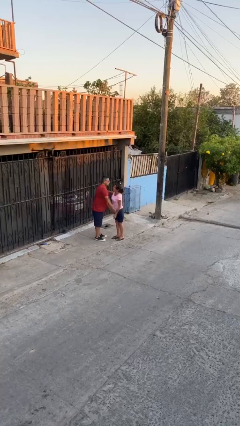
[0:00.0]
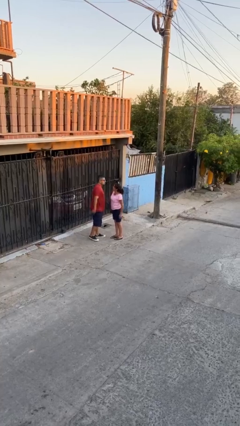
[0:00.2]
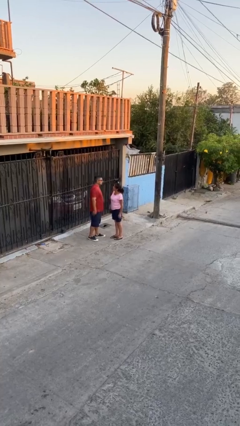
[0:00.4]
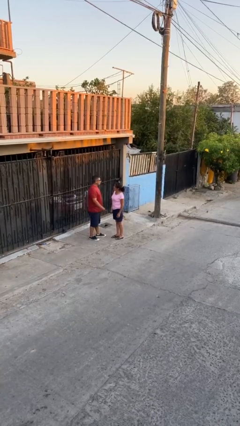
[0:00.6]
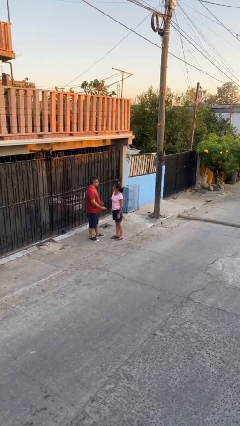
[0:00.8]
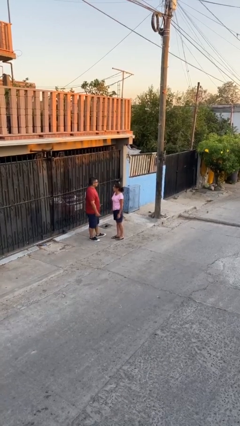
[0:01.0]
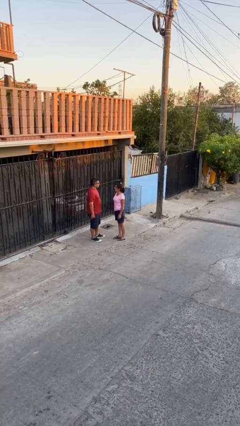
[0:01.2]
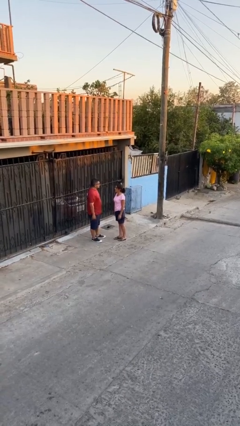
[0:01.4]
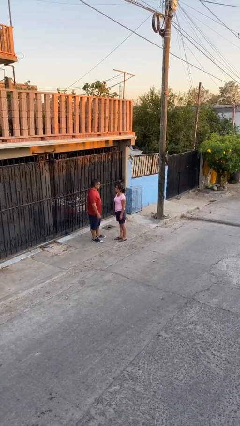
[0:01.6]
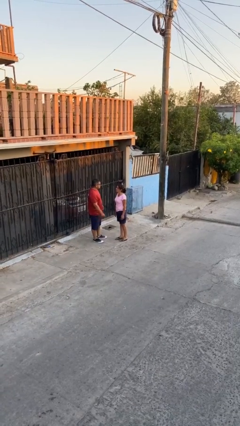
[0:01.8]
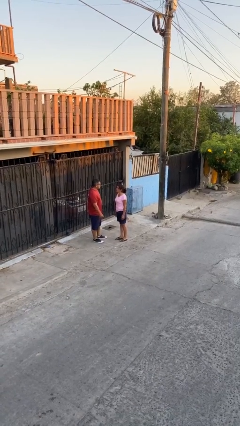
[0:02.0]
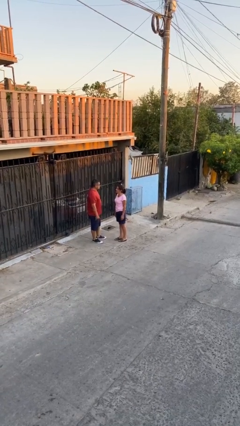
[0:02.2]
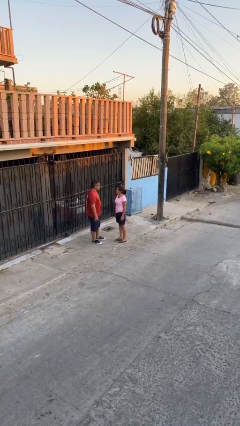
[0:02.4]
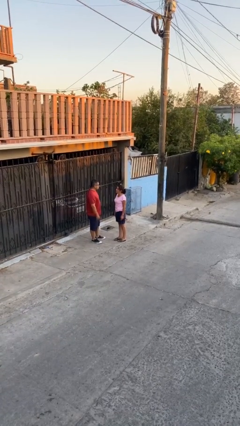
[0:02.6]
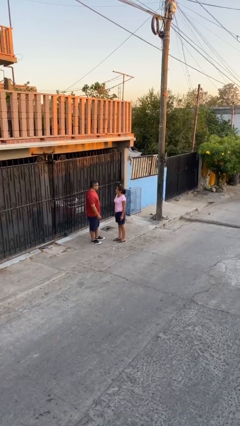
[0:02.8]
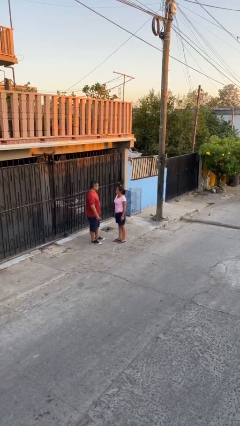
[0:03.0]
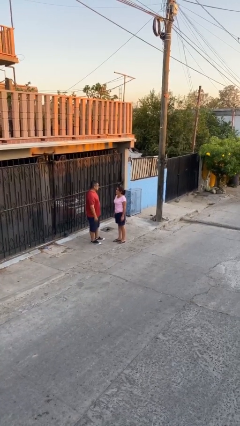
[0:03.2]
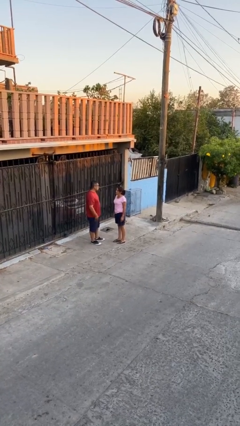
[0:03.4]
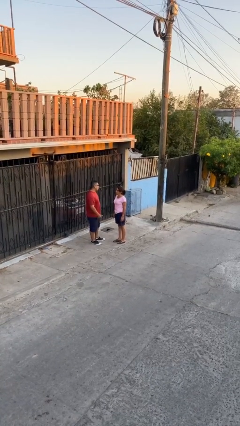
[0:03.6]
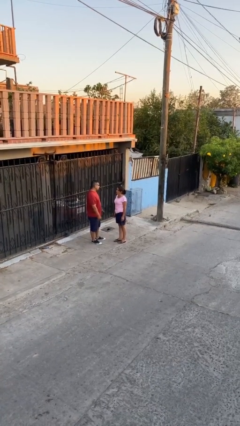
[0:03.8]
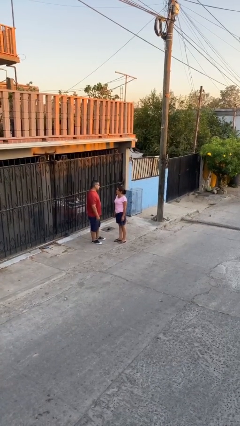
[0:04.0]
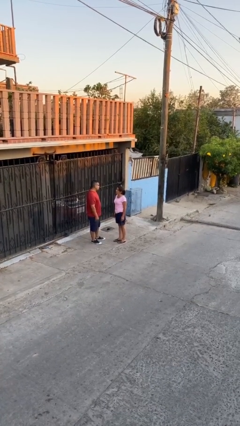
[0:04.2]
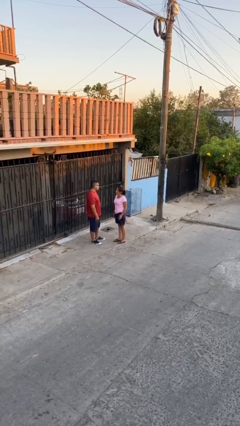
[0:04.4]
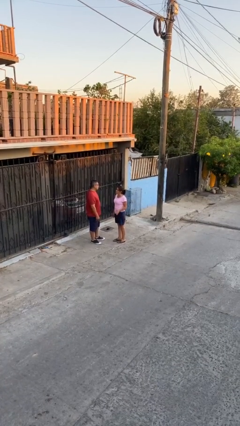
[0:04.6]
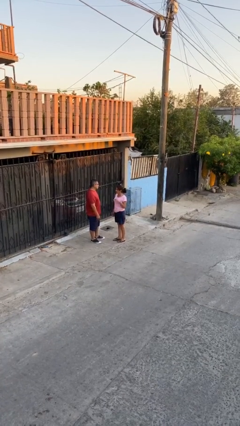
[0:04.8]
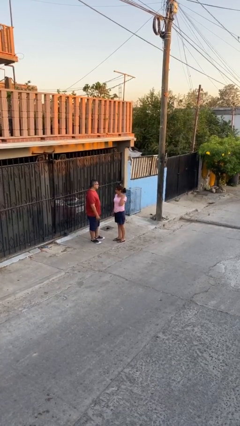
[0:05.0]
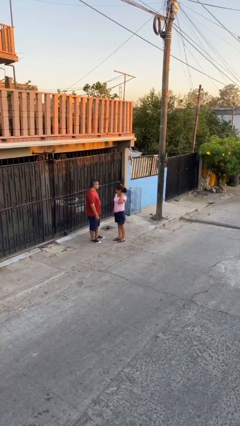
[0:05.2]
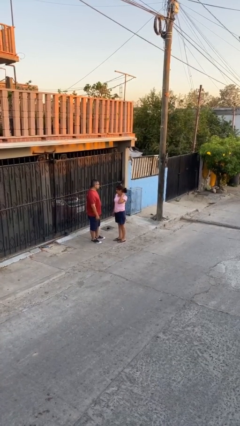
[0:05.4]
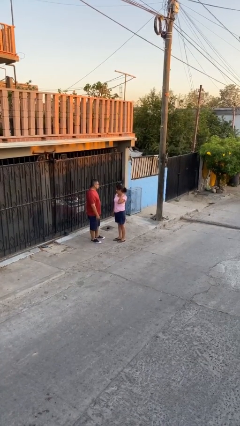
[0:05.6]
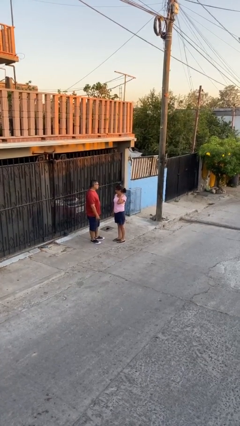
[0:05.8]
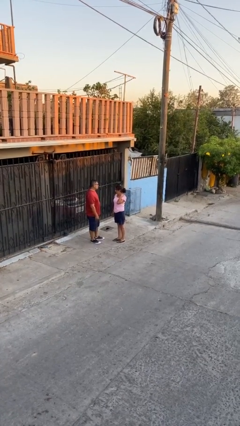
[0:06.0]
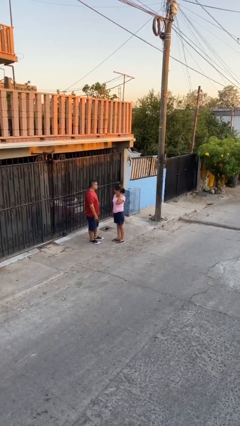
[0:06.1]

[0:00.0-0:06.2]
person talks to person

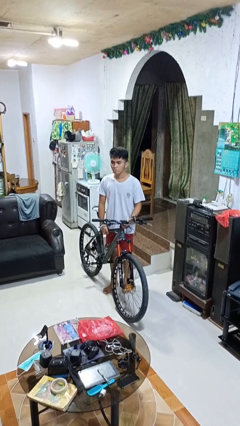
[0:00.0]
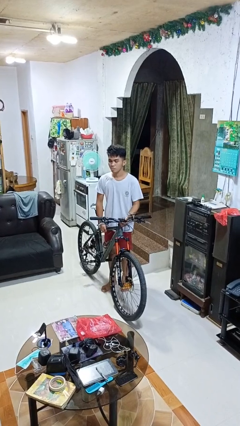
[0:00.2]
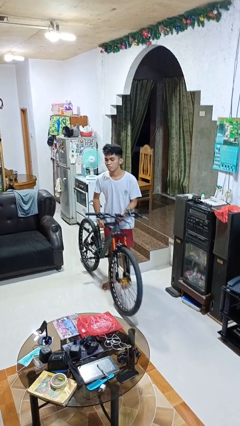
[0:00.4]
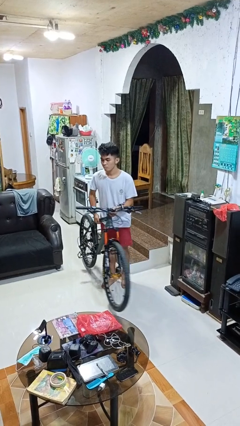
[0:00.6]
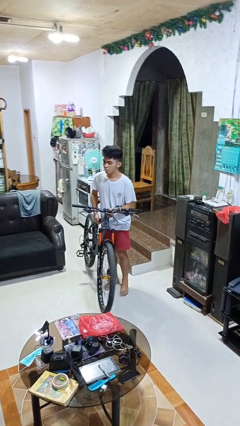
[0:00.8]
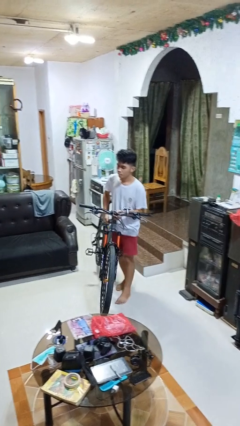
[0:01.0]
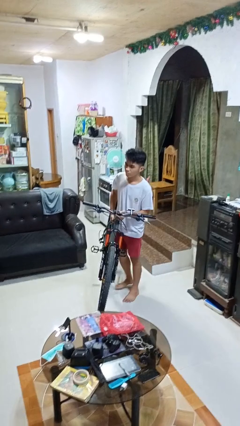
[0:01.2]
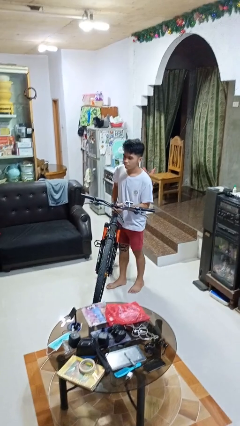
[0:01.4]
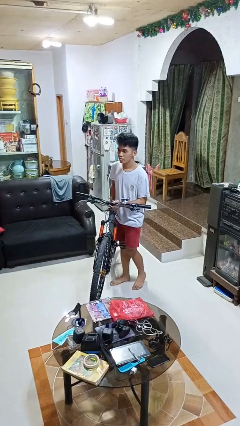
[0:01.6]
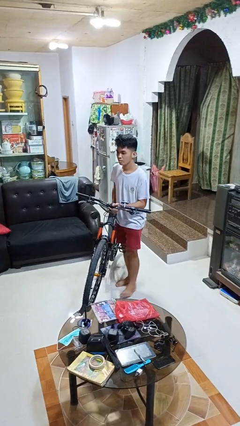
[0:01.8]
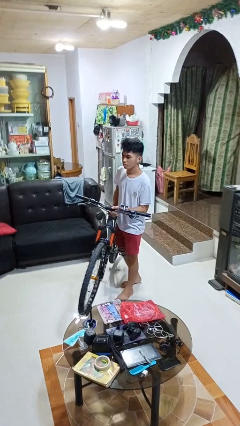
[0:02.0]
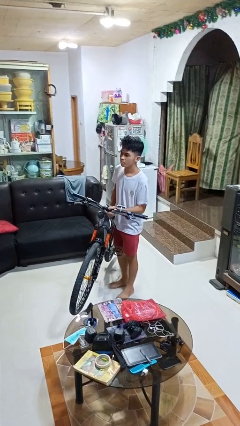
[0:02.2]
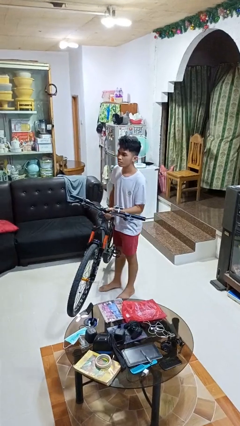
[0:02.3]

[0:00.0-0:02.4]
person carries bicycle

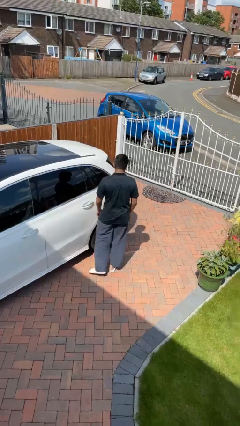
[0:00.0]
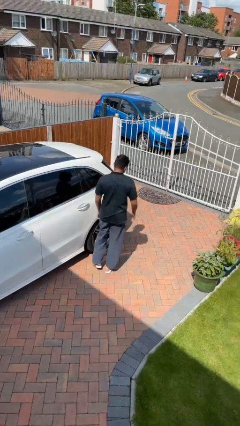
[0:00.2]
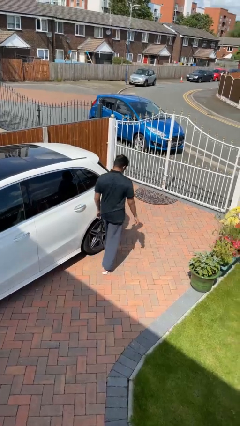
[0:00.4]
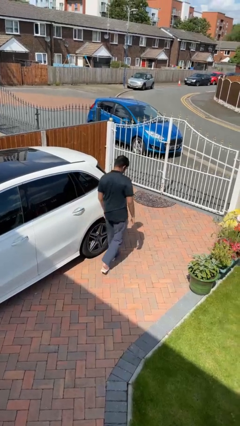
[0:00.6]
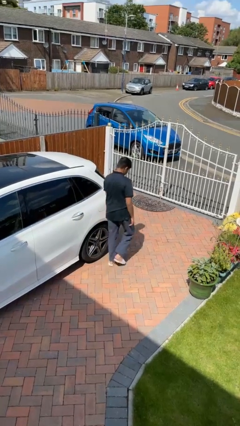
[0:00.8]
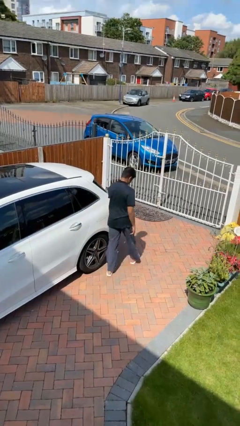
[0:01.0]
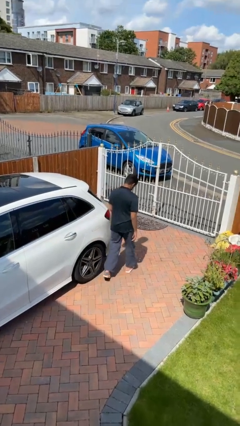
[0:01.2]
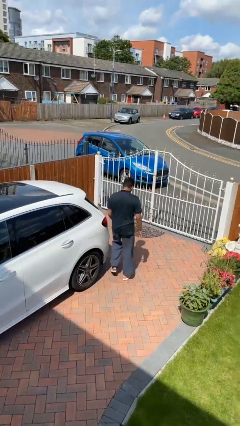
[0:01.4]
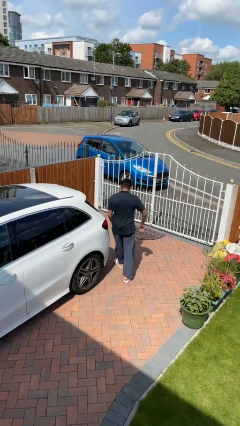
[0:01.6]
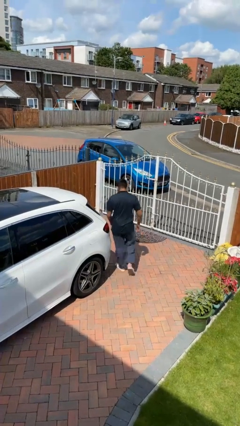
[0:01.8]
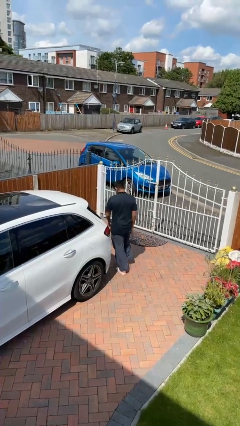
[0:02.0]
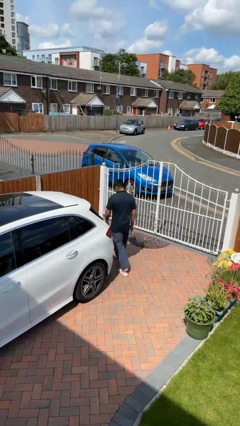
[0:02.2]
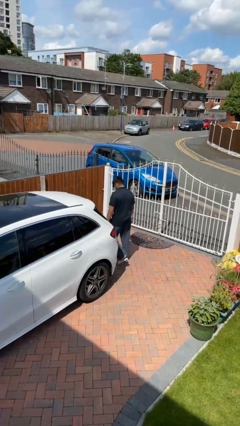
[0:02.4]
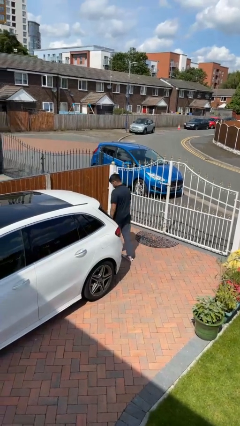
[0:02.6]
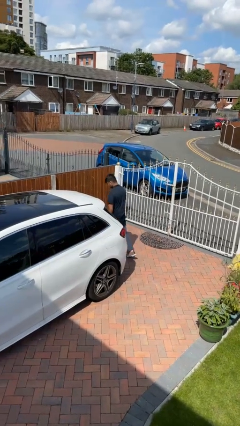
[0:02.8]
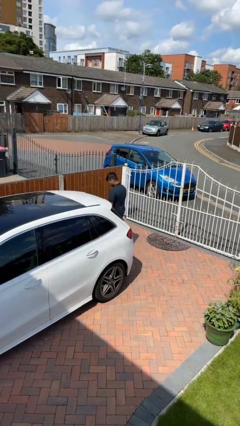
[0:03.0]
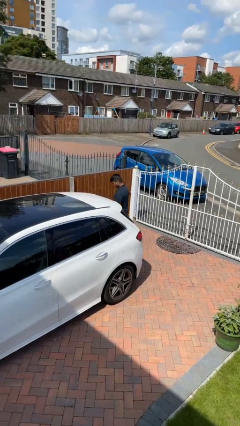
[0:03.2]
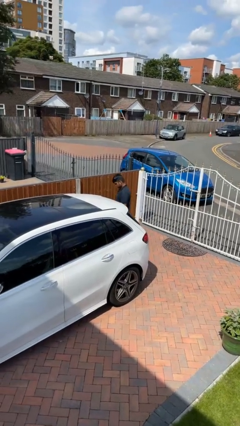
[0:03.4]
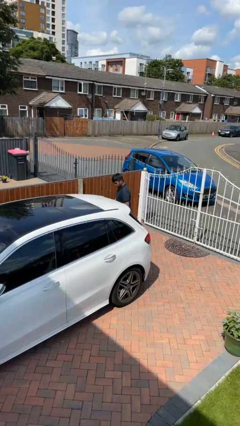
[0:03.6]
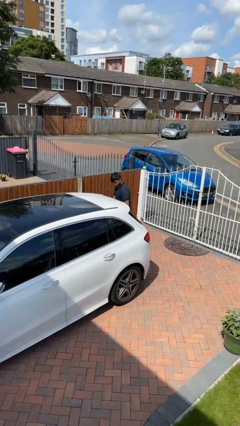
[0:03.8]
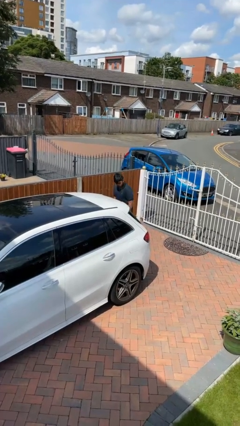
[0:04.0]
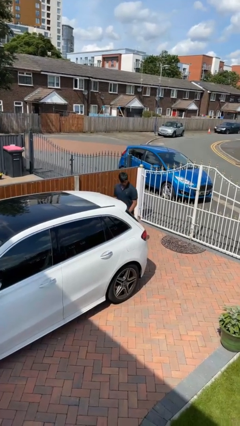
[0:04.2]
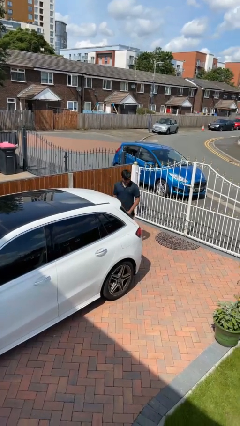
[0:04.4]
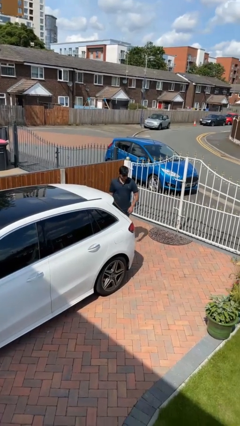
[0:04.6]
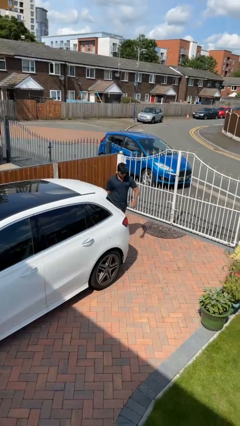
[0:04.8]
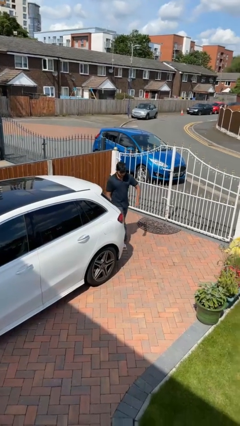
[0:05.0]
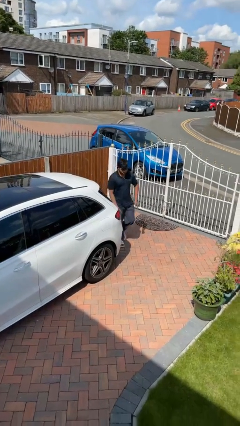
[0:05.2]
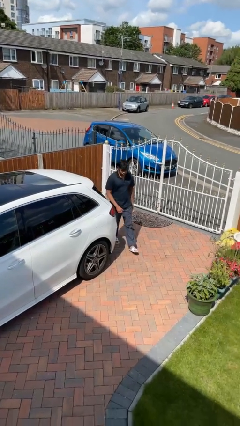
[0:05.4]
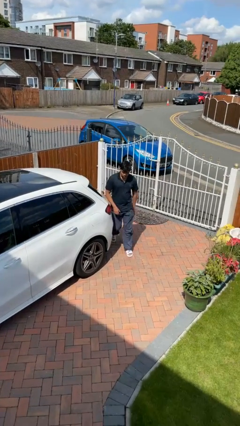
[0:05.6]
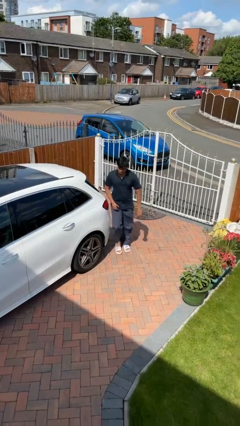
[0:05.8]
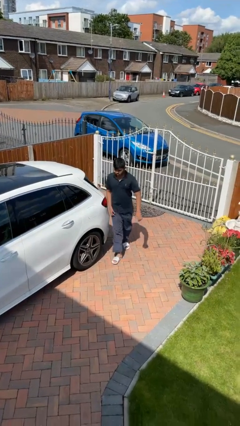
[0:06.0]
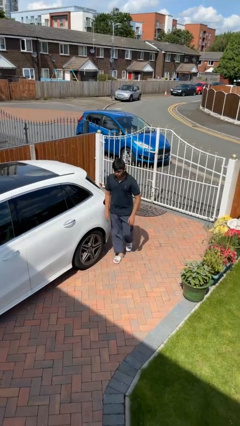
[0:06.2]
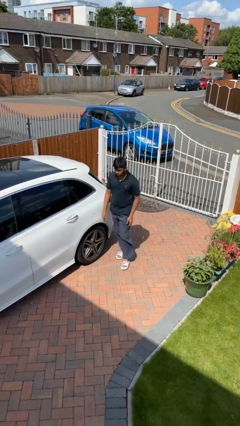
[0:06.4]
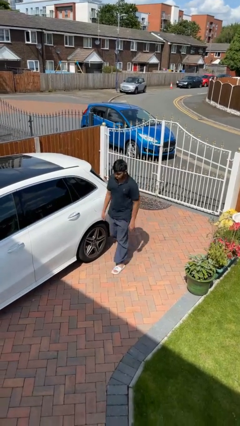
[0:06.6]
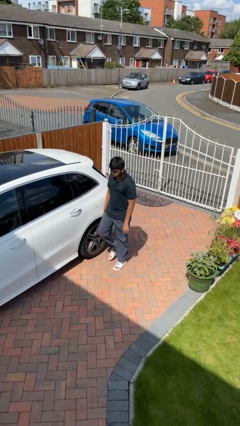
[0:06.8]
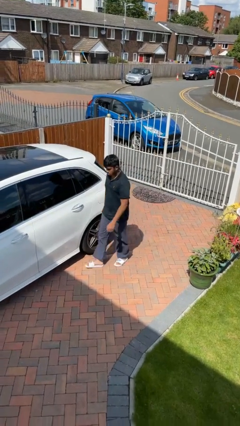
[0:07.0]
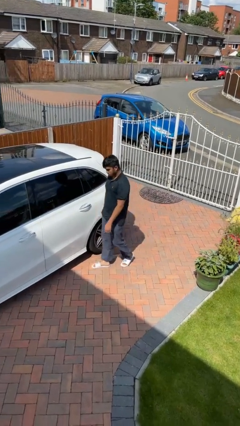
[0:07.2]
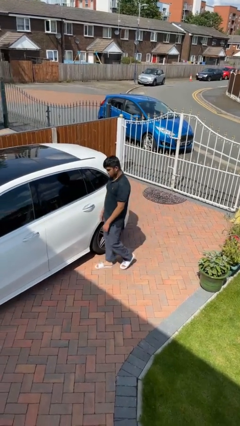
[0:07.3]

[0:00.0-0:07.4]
person walks around car

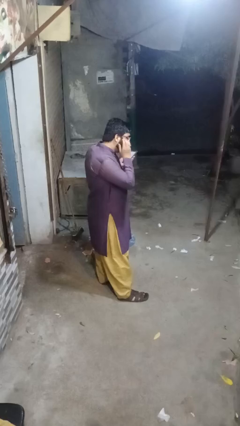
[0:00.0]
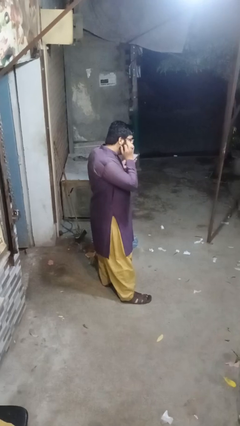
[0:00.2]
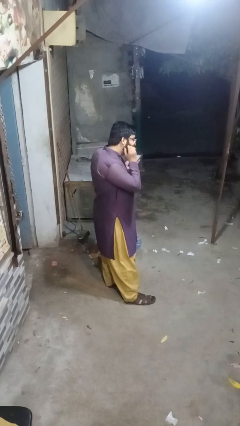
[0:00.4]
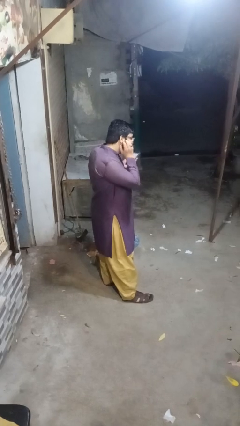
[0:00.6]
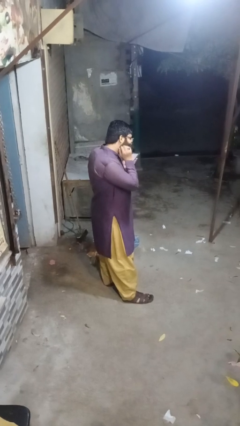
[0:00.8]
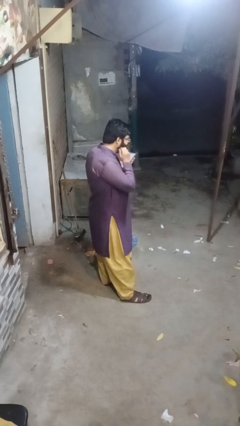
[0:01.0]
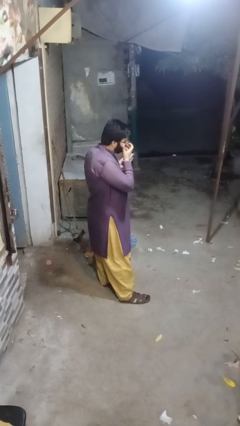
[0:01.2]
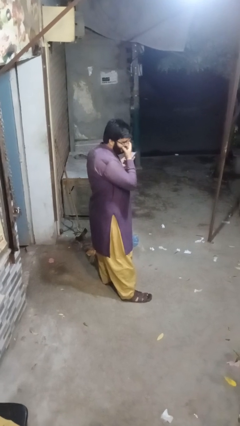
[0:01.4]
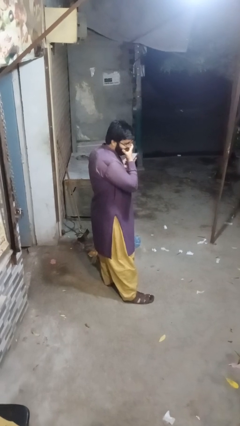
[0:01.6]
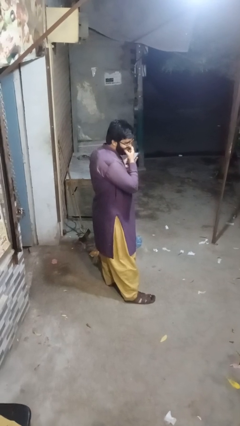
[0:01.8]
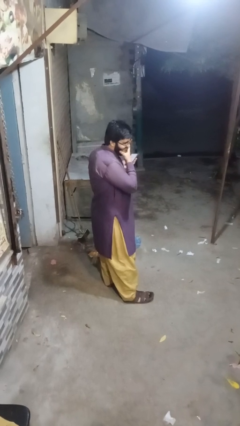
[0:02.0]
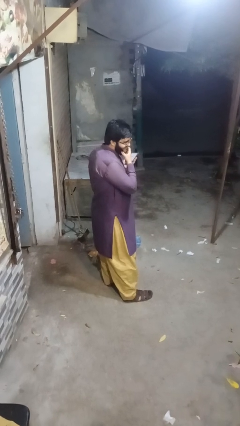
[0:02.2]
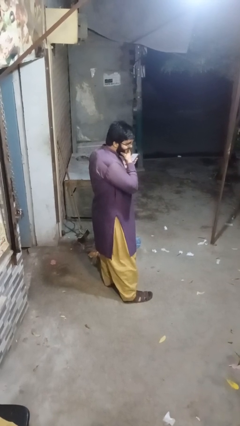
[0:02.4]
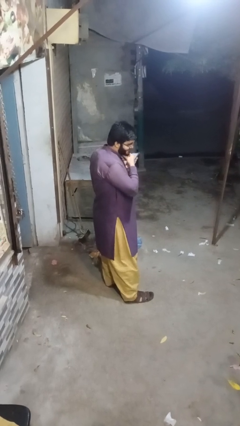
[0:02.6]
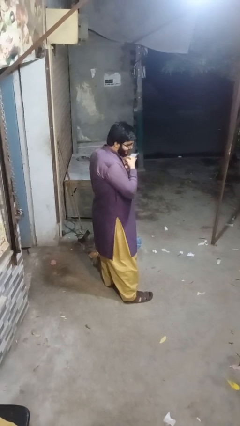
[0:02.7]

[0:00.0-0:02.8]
person scratches face
